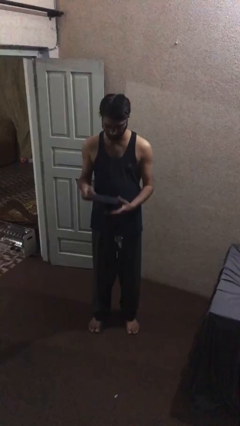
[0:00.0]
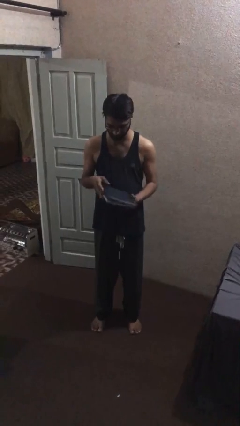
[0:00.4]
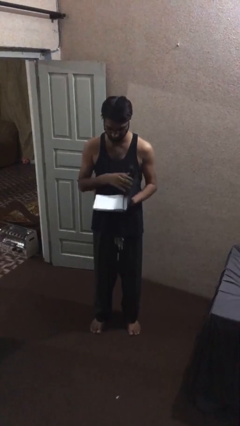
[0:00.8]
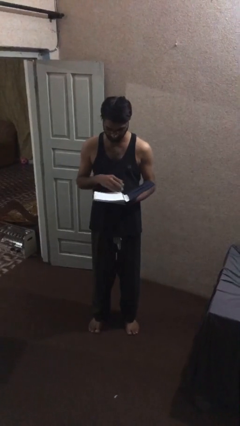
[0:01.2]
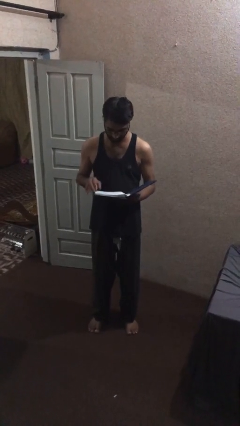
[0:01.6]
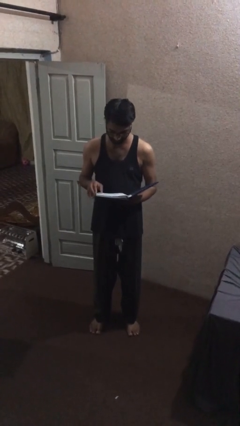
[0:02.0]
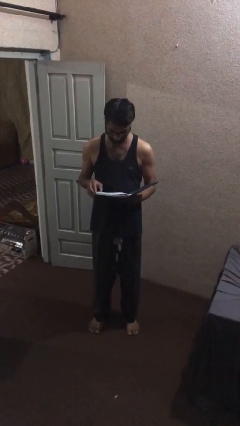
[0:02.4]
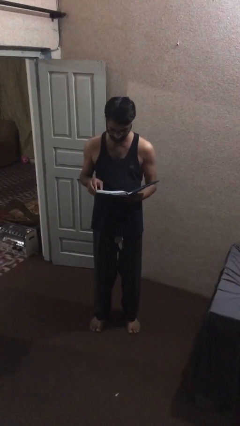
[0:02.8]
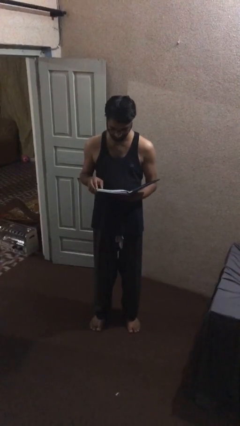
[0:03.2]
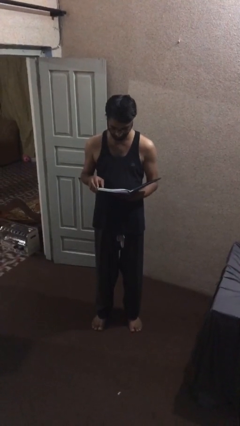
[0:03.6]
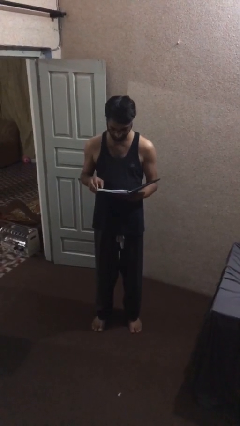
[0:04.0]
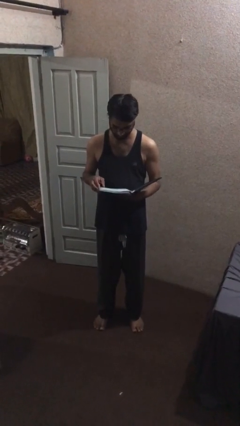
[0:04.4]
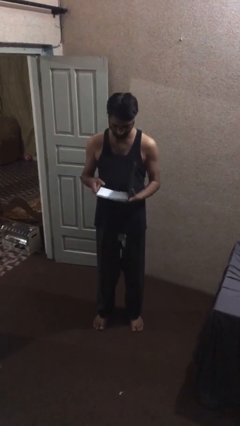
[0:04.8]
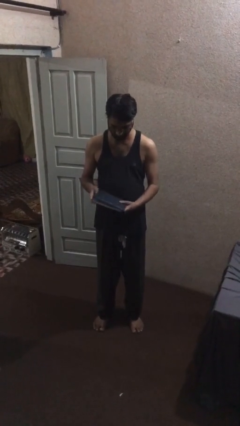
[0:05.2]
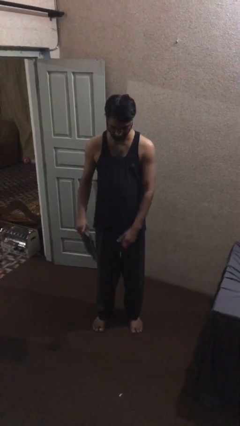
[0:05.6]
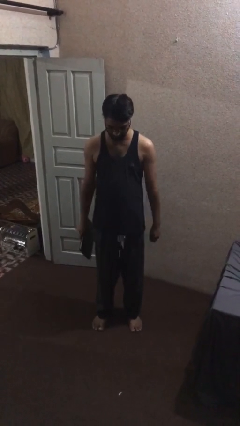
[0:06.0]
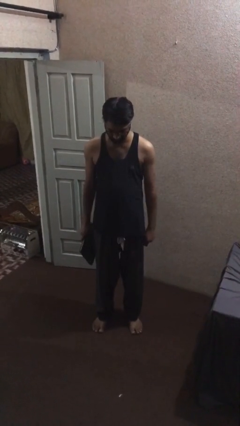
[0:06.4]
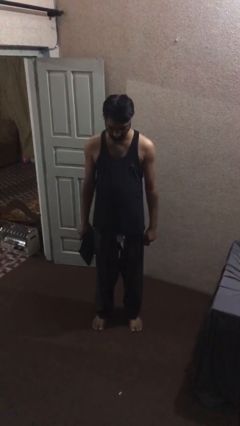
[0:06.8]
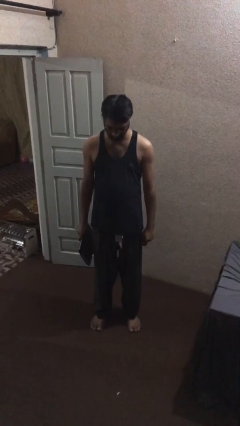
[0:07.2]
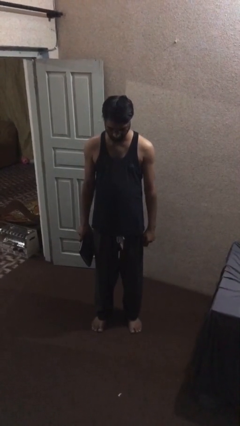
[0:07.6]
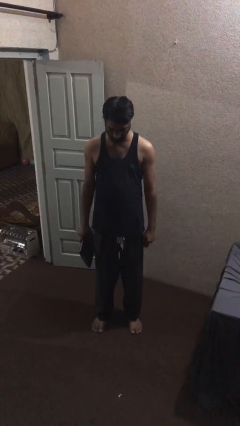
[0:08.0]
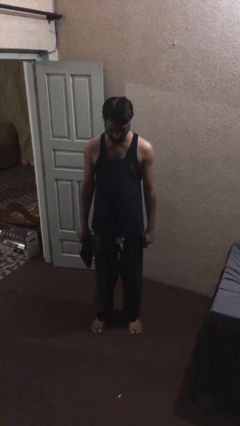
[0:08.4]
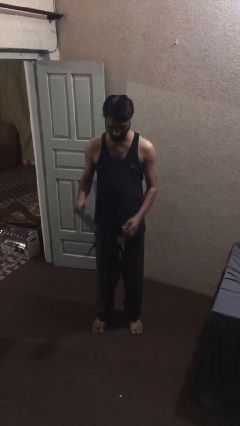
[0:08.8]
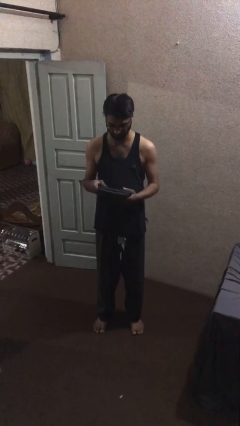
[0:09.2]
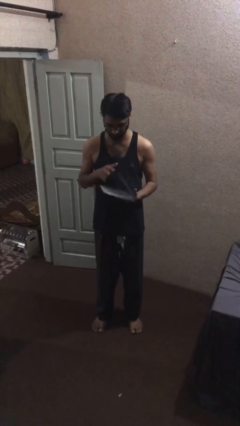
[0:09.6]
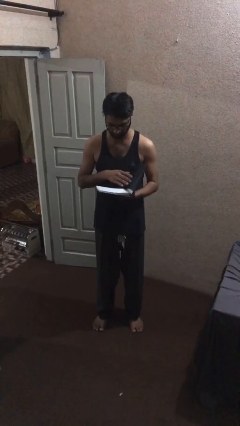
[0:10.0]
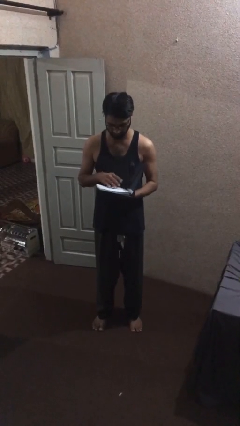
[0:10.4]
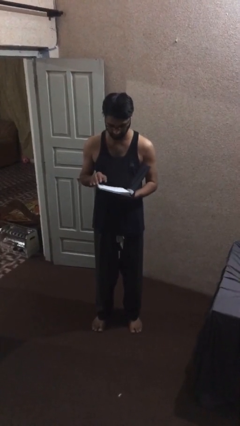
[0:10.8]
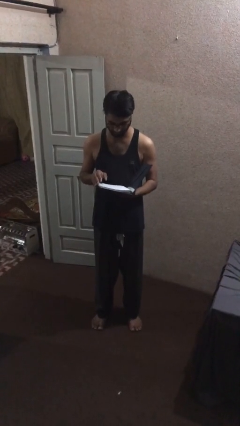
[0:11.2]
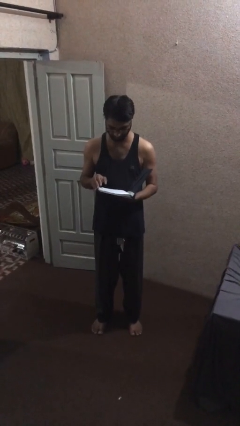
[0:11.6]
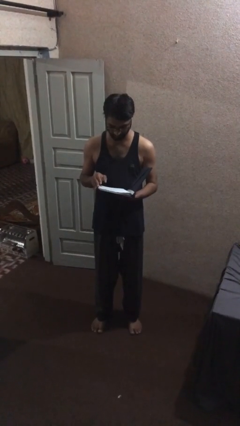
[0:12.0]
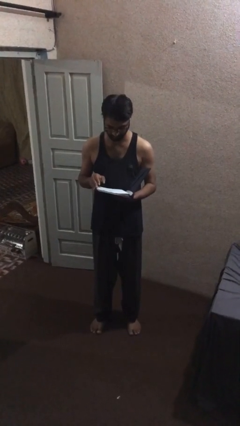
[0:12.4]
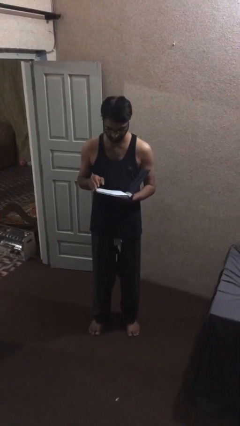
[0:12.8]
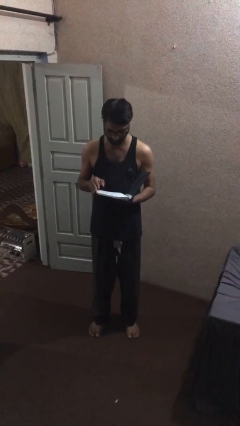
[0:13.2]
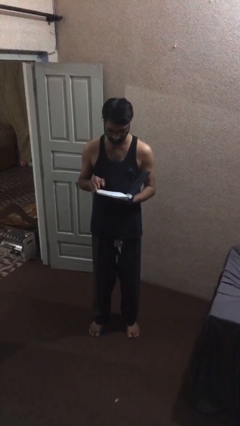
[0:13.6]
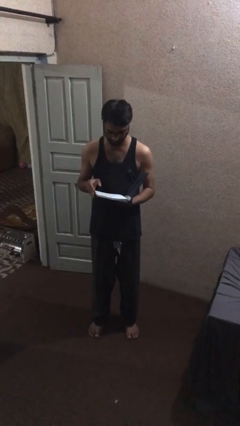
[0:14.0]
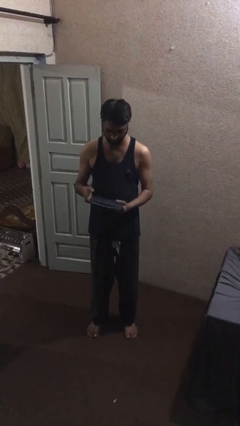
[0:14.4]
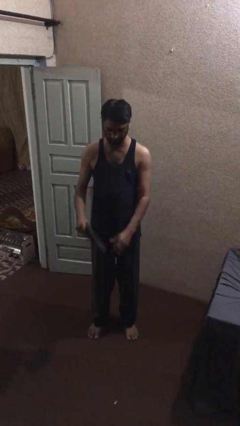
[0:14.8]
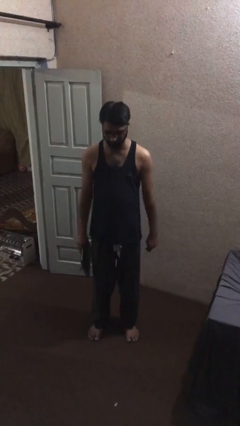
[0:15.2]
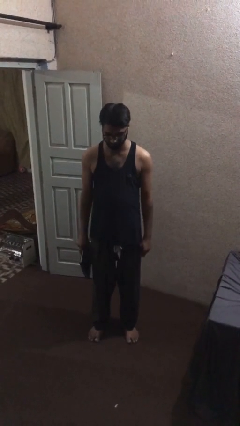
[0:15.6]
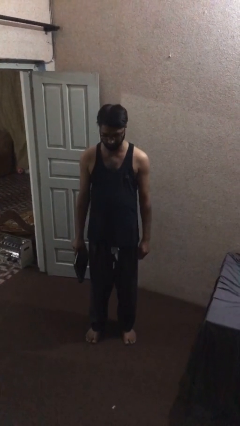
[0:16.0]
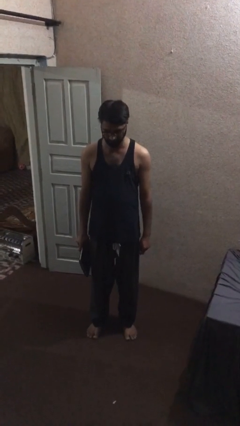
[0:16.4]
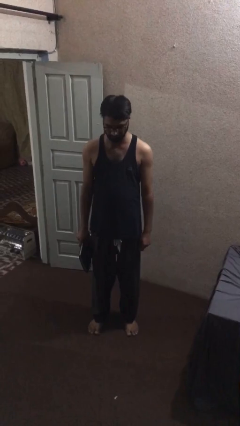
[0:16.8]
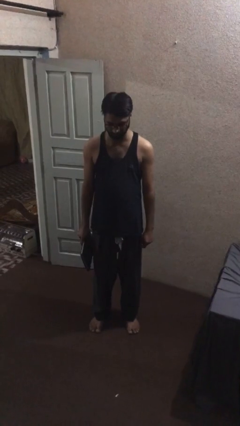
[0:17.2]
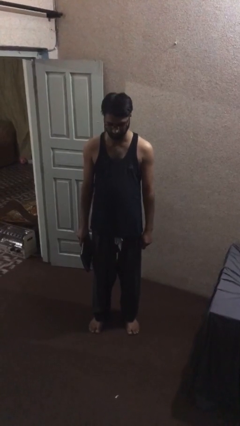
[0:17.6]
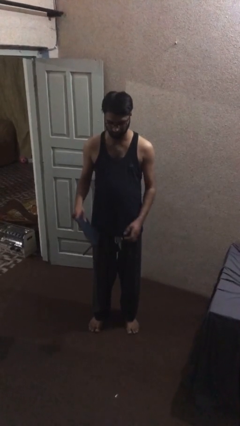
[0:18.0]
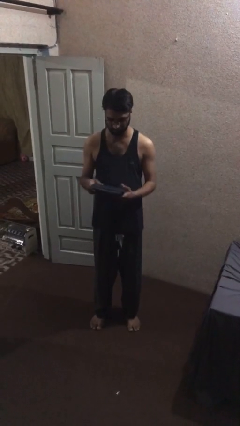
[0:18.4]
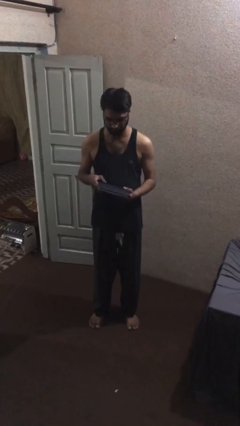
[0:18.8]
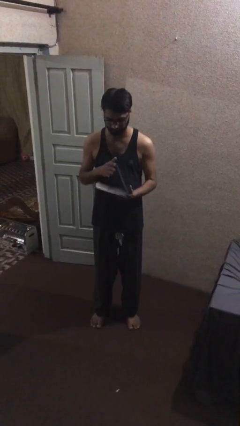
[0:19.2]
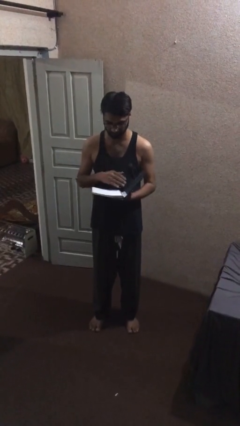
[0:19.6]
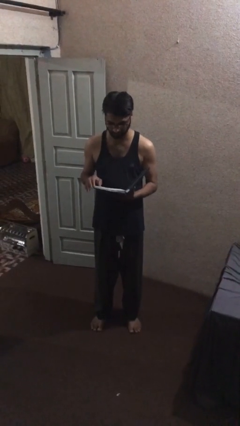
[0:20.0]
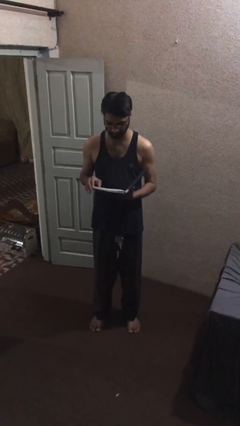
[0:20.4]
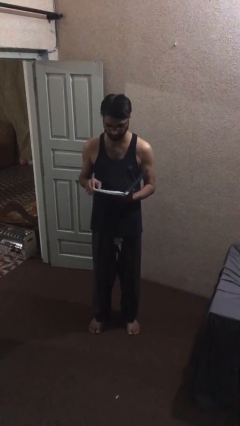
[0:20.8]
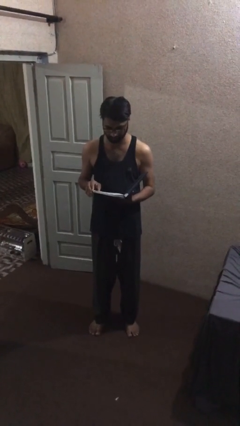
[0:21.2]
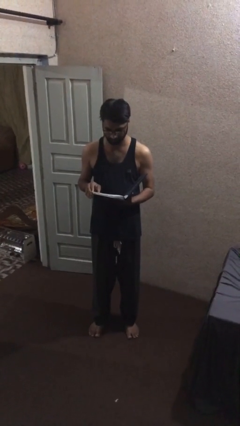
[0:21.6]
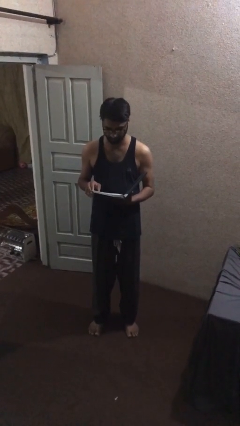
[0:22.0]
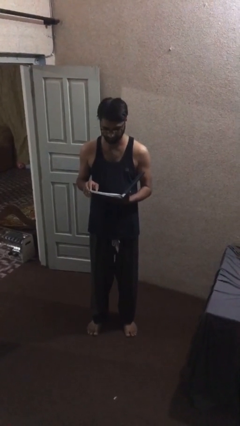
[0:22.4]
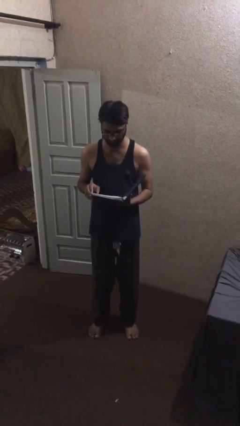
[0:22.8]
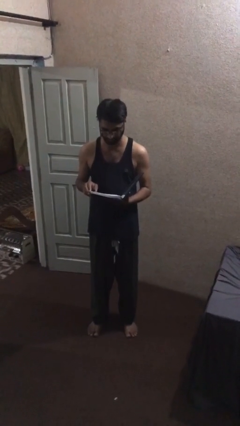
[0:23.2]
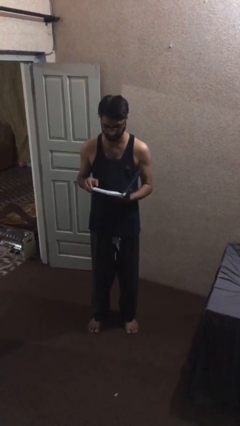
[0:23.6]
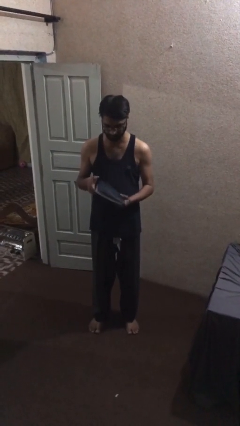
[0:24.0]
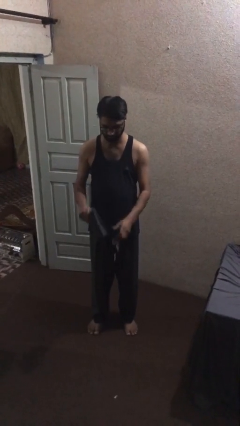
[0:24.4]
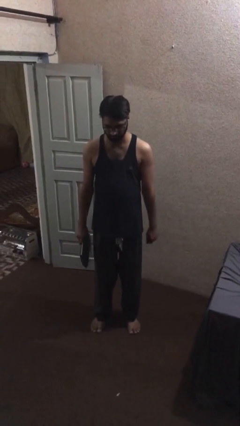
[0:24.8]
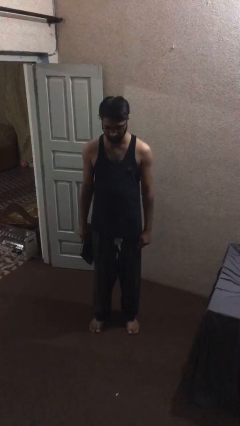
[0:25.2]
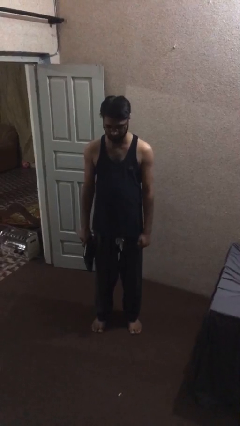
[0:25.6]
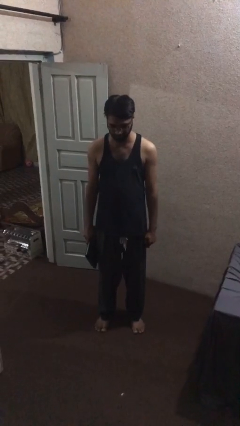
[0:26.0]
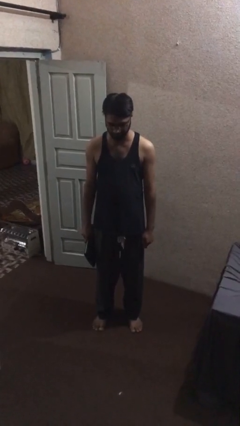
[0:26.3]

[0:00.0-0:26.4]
person reads document

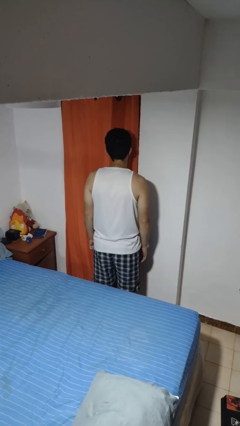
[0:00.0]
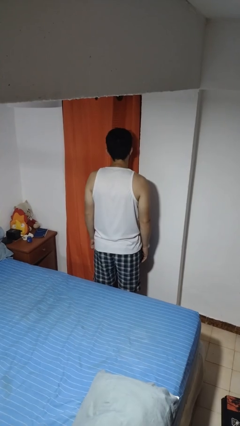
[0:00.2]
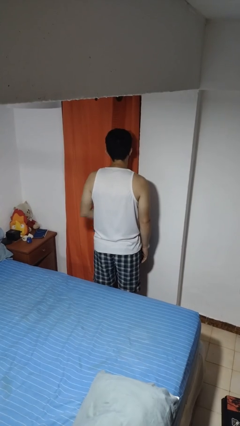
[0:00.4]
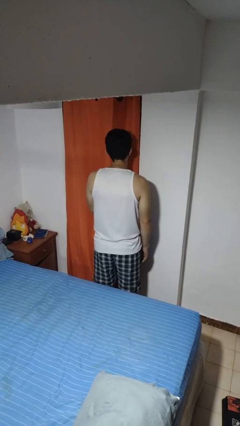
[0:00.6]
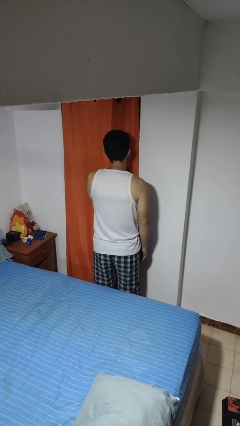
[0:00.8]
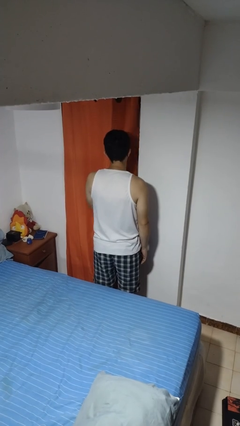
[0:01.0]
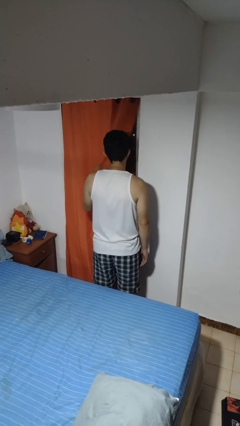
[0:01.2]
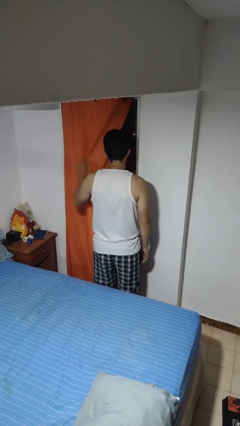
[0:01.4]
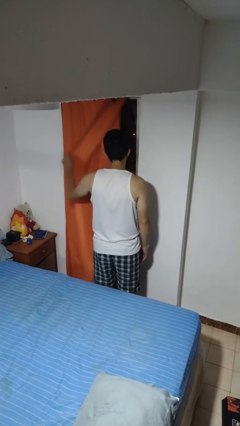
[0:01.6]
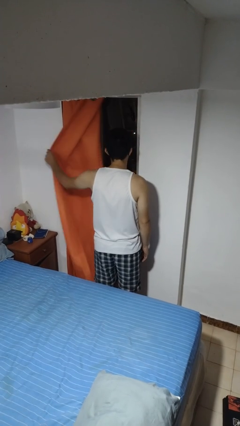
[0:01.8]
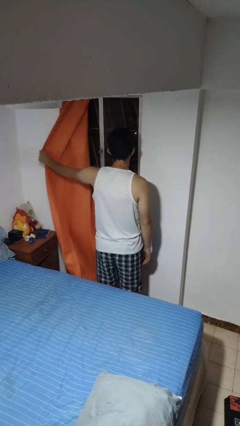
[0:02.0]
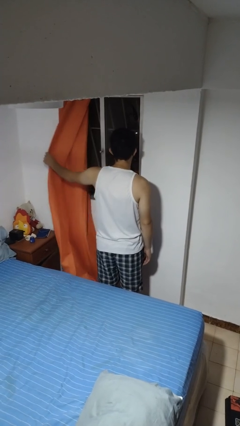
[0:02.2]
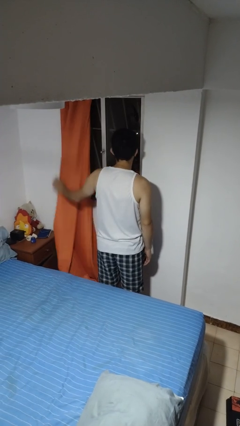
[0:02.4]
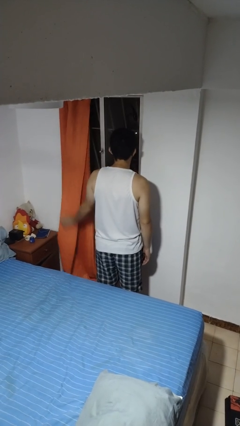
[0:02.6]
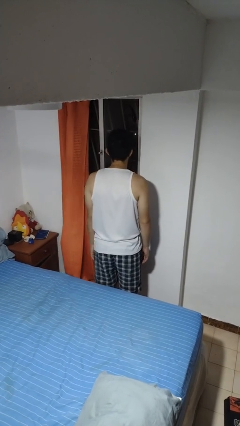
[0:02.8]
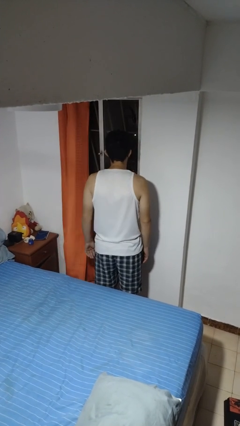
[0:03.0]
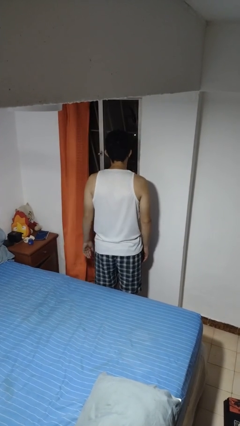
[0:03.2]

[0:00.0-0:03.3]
person opens curtains

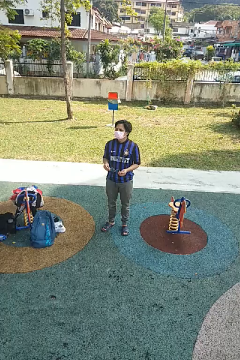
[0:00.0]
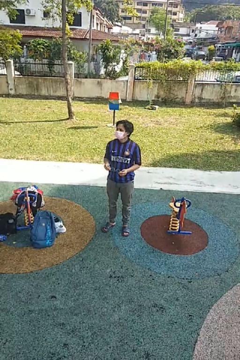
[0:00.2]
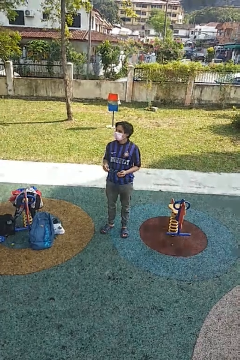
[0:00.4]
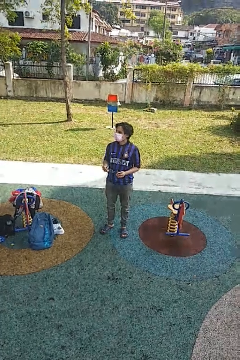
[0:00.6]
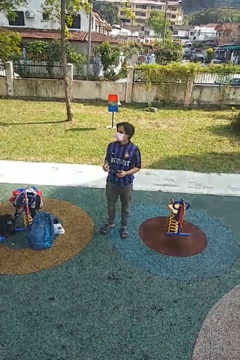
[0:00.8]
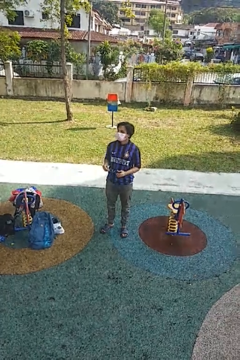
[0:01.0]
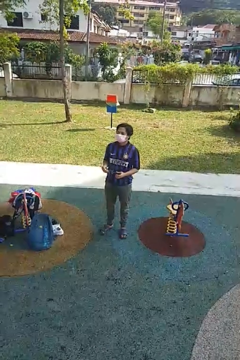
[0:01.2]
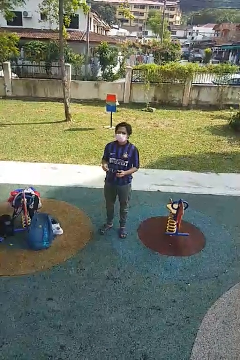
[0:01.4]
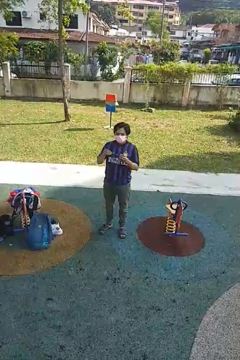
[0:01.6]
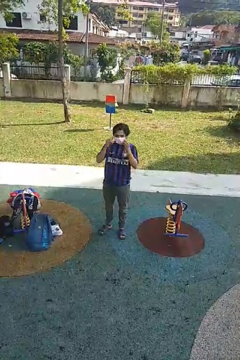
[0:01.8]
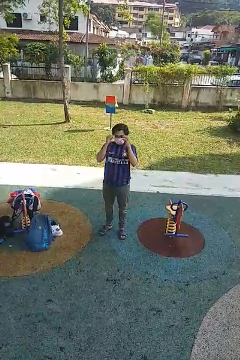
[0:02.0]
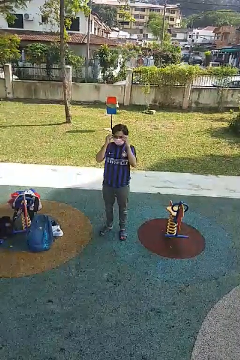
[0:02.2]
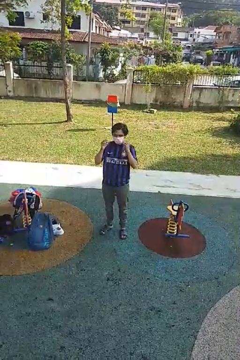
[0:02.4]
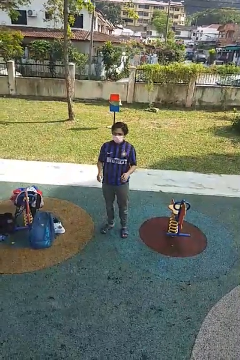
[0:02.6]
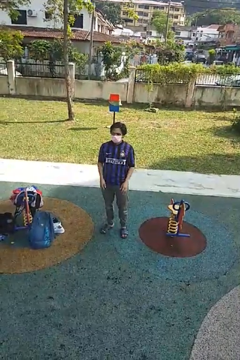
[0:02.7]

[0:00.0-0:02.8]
person puts on glasses
